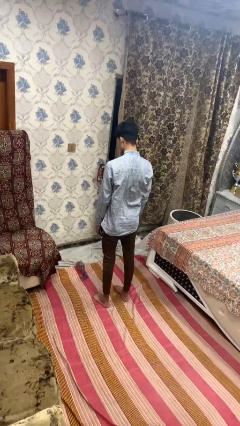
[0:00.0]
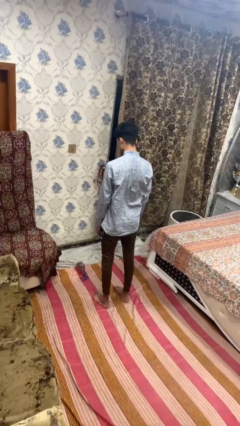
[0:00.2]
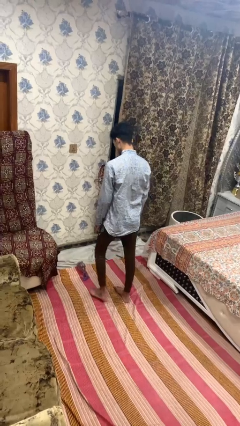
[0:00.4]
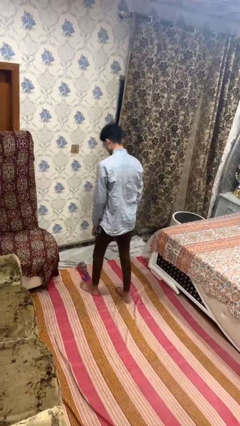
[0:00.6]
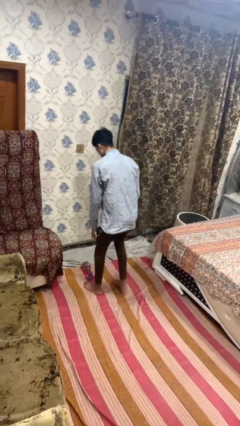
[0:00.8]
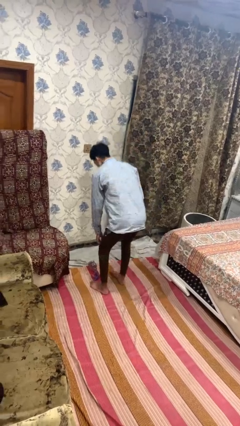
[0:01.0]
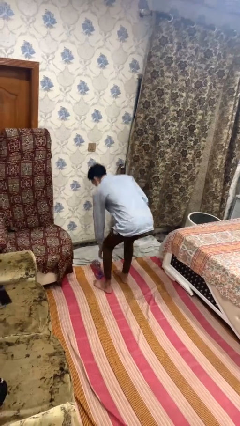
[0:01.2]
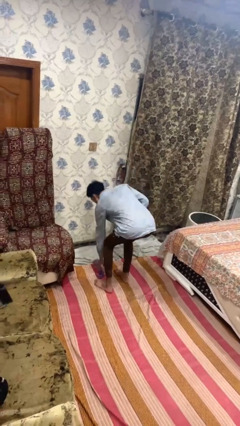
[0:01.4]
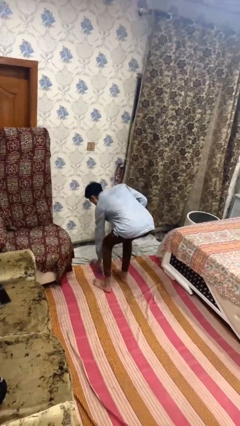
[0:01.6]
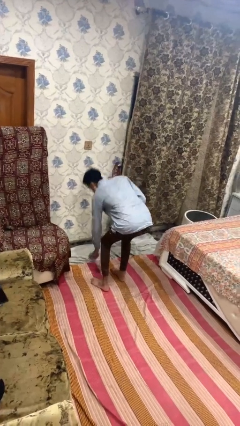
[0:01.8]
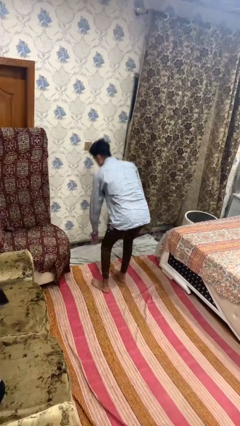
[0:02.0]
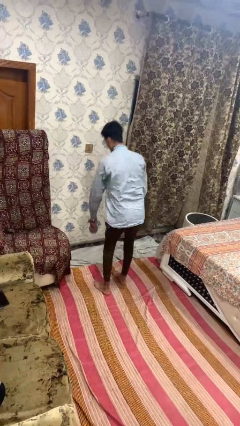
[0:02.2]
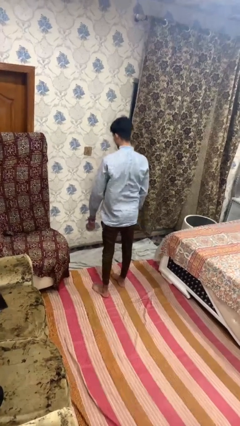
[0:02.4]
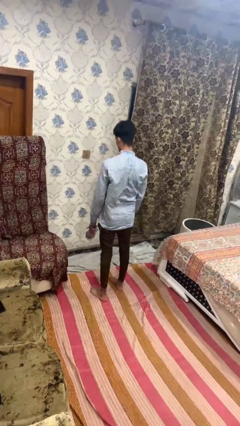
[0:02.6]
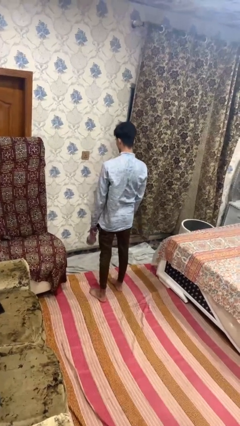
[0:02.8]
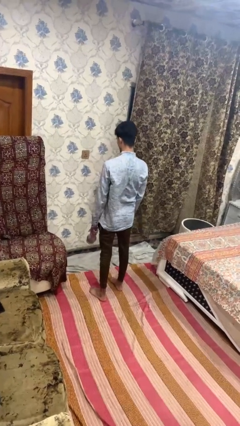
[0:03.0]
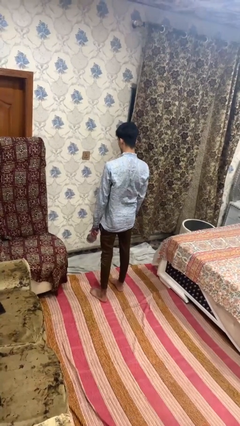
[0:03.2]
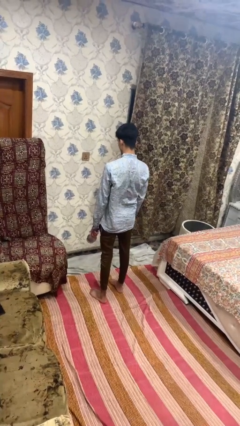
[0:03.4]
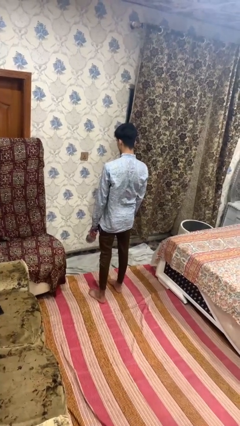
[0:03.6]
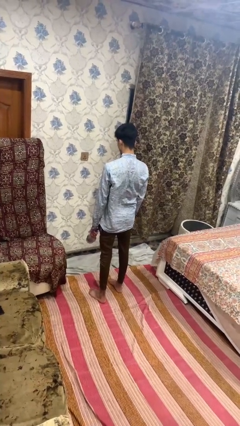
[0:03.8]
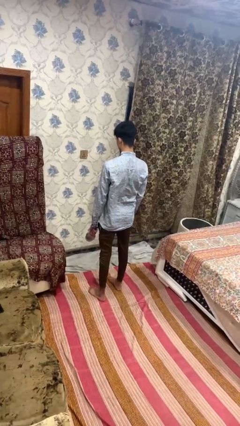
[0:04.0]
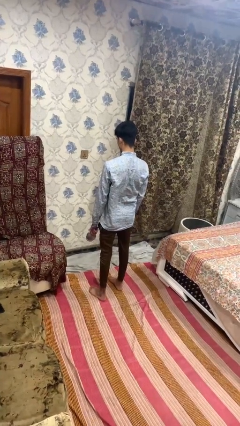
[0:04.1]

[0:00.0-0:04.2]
person picks up object from floor

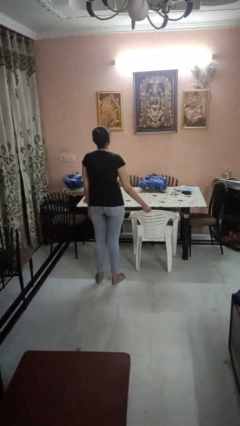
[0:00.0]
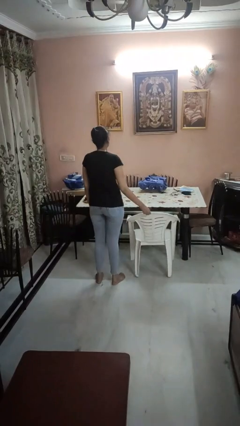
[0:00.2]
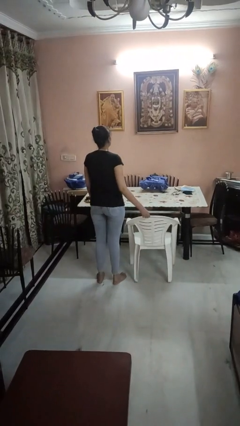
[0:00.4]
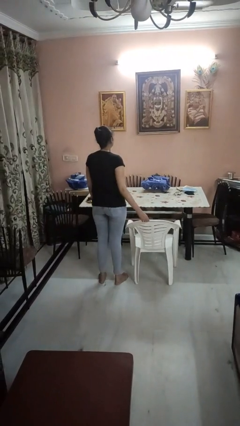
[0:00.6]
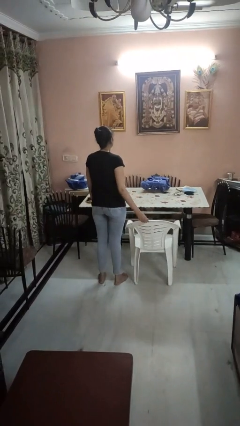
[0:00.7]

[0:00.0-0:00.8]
person pulls out chair

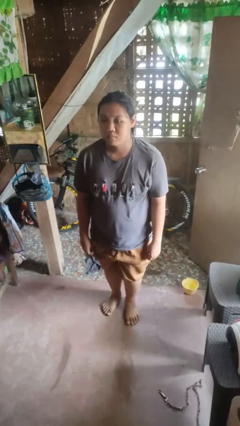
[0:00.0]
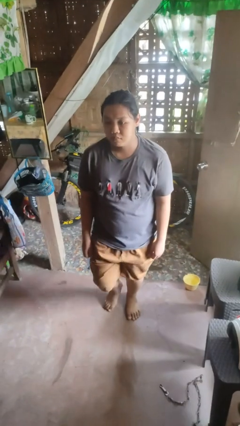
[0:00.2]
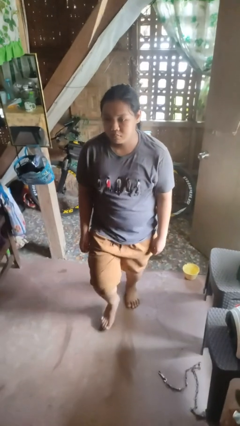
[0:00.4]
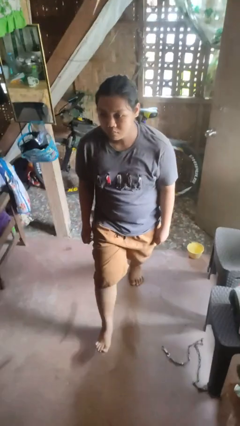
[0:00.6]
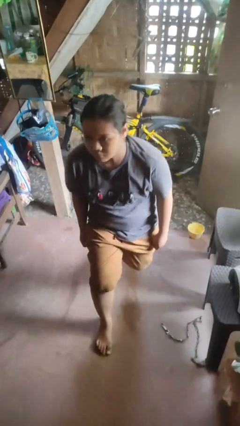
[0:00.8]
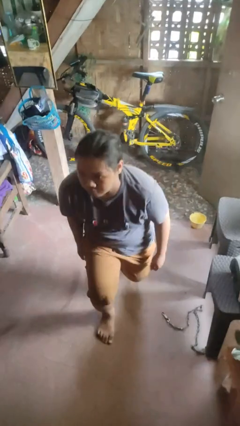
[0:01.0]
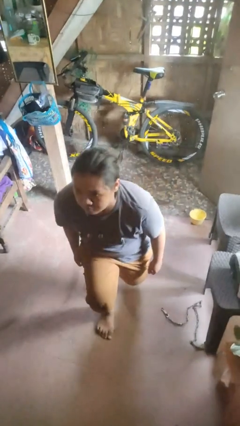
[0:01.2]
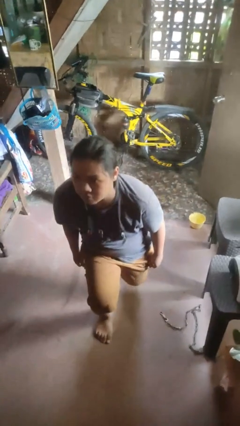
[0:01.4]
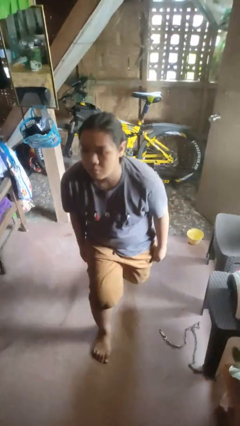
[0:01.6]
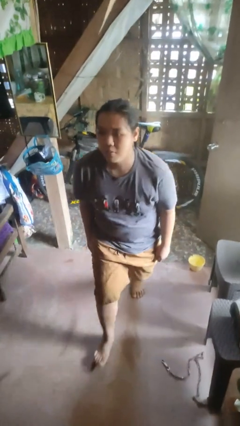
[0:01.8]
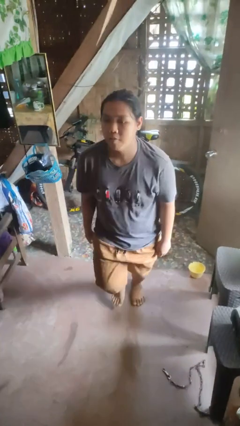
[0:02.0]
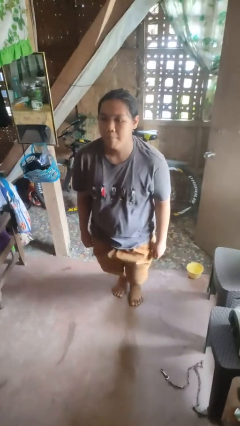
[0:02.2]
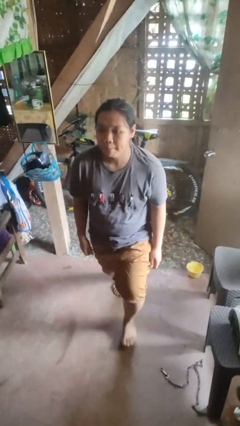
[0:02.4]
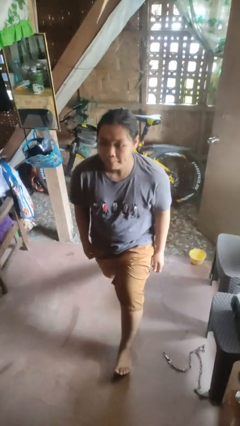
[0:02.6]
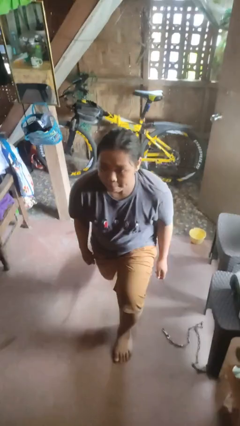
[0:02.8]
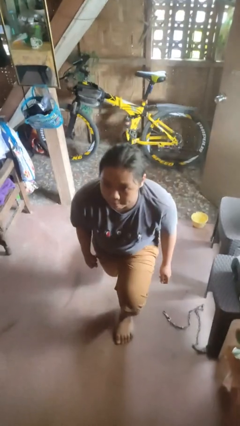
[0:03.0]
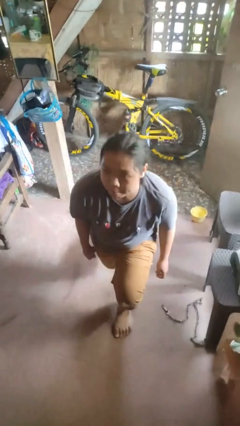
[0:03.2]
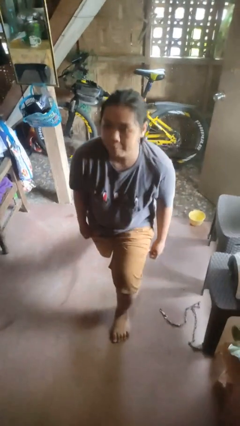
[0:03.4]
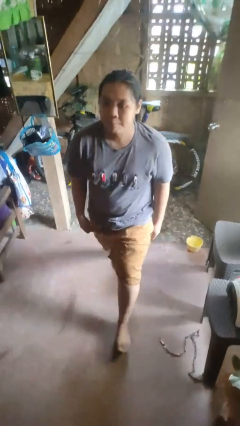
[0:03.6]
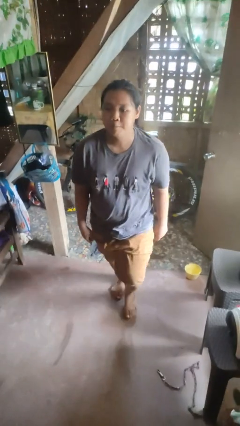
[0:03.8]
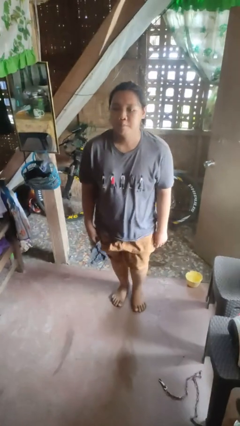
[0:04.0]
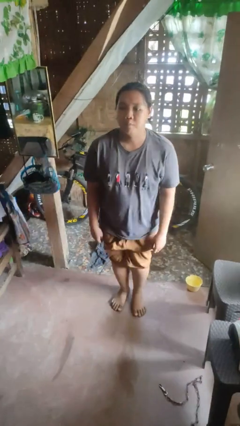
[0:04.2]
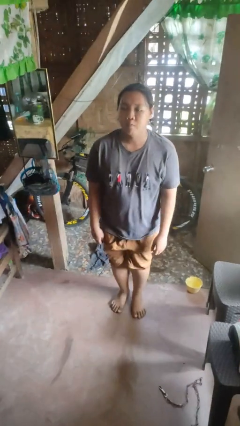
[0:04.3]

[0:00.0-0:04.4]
person exercises with lunges

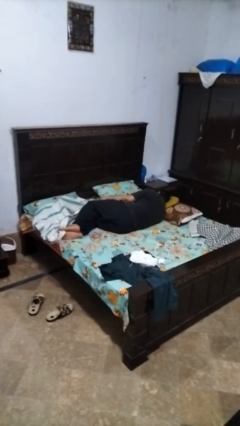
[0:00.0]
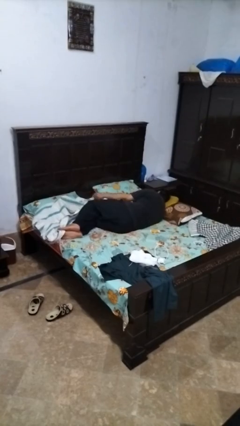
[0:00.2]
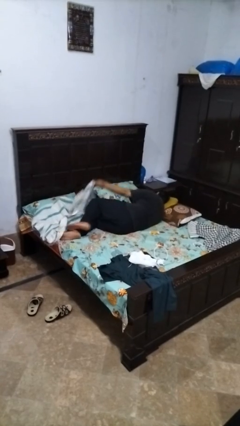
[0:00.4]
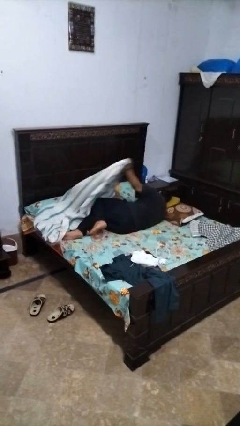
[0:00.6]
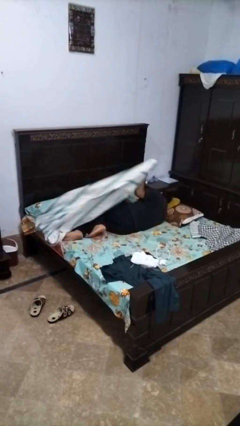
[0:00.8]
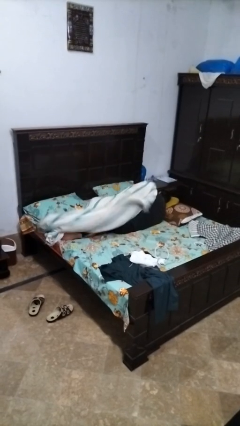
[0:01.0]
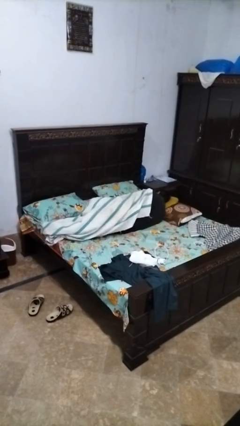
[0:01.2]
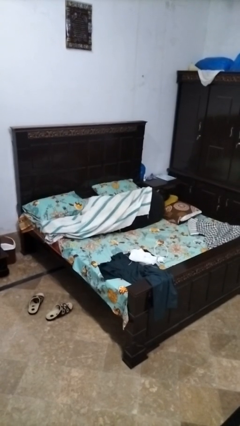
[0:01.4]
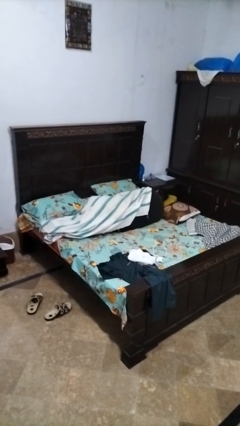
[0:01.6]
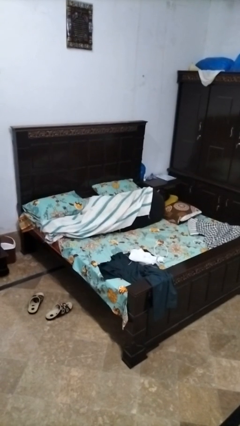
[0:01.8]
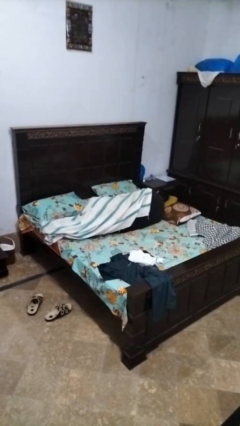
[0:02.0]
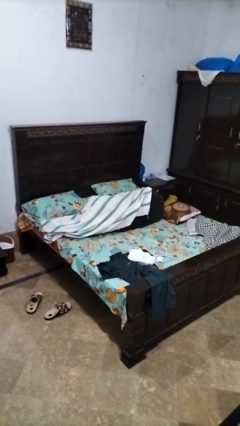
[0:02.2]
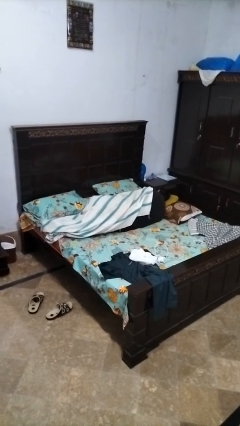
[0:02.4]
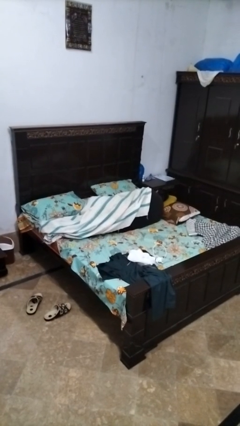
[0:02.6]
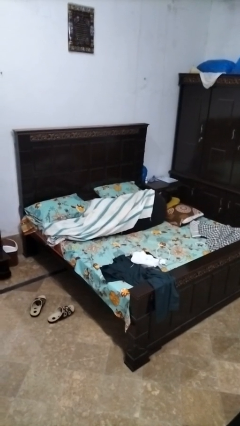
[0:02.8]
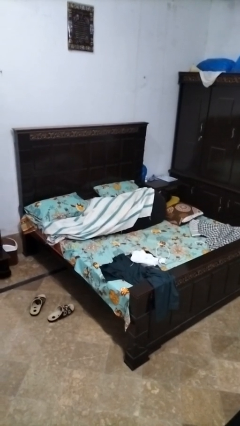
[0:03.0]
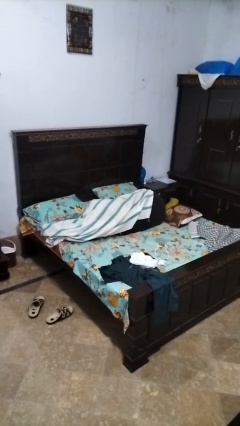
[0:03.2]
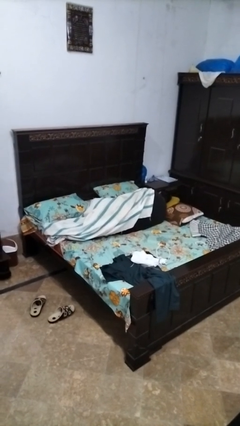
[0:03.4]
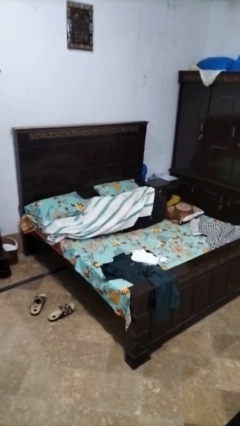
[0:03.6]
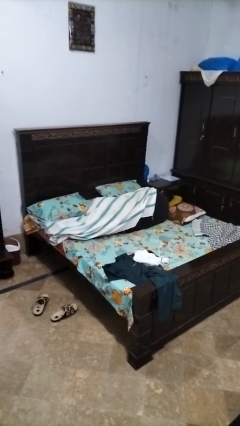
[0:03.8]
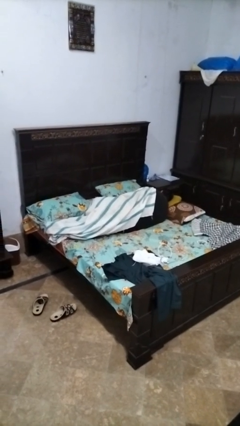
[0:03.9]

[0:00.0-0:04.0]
person covers with bedsheets

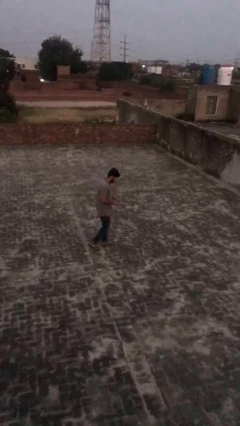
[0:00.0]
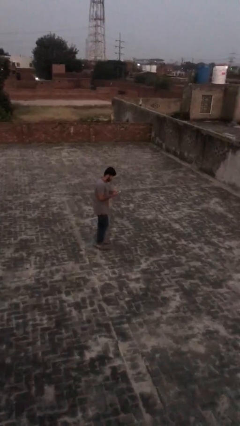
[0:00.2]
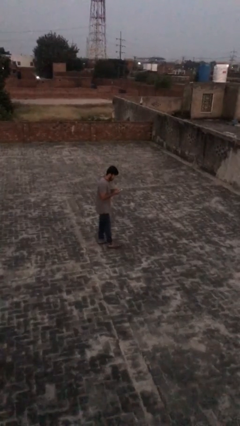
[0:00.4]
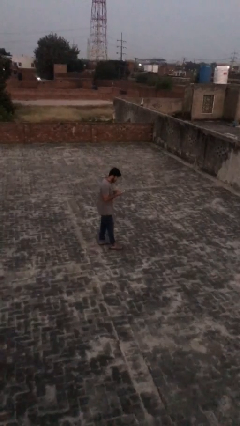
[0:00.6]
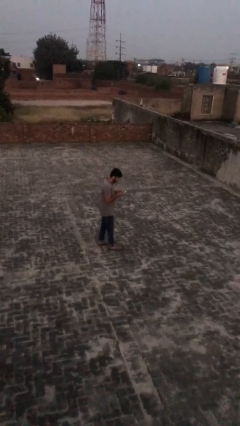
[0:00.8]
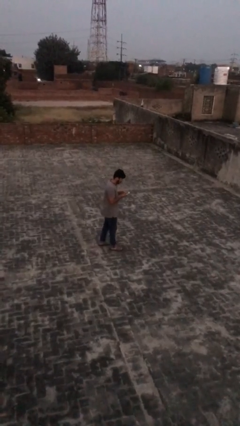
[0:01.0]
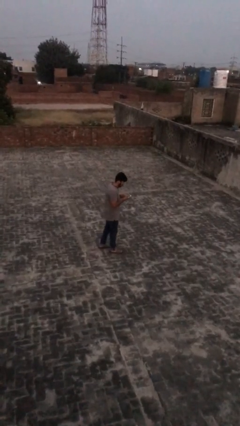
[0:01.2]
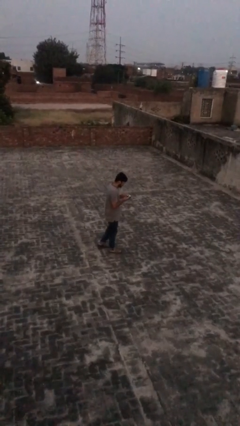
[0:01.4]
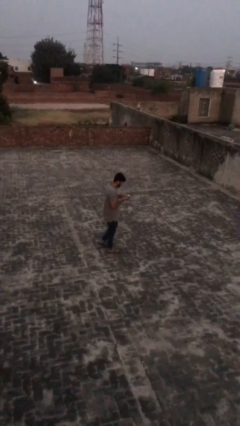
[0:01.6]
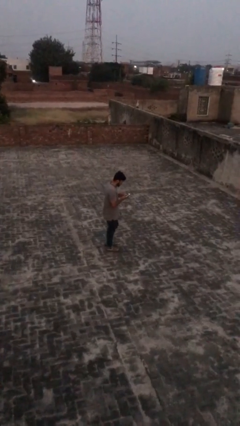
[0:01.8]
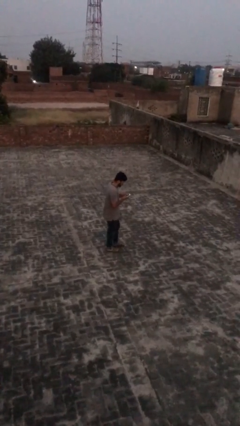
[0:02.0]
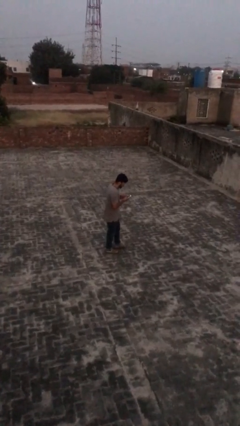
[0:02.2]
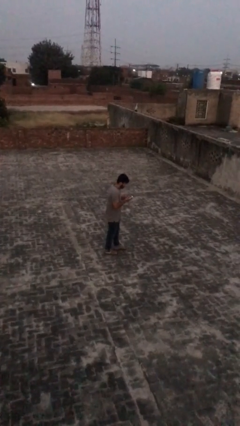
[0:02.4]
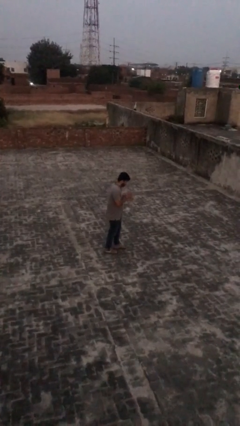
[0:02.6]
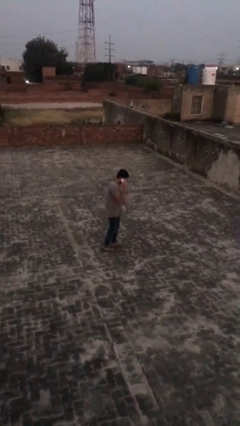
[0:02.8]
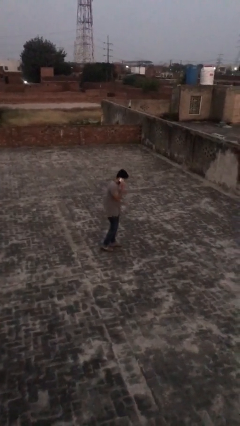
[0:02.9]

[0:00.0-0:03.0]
person texts on phone

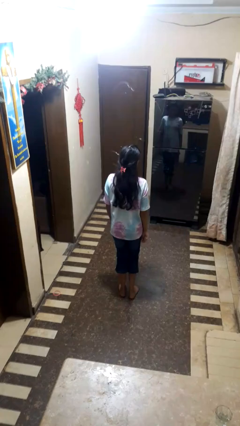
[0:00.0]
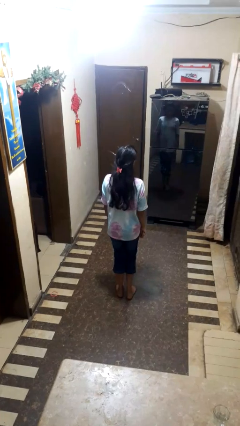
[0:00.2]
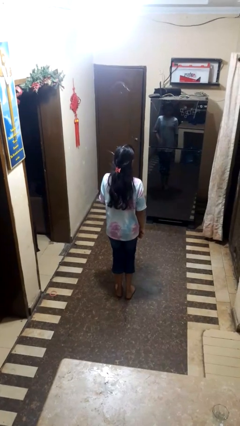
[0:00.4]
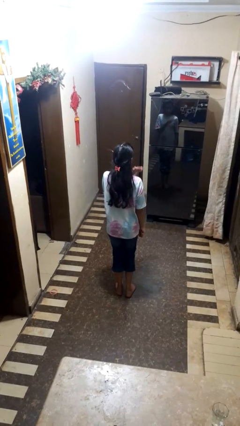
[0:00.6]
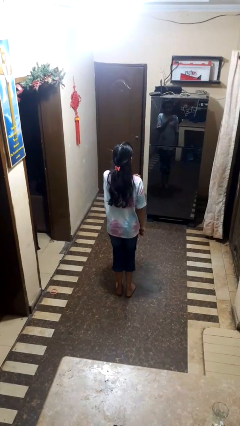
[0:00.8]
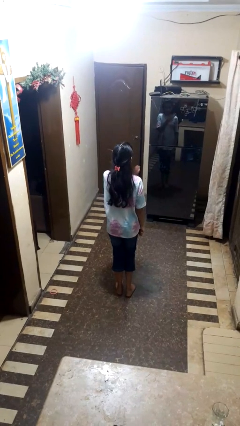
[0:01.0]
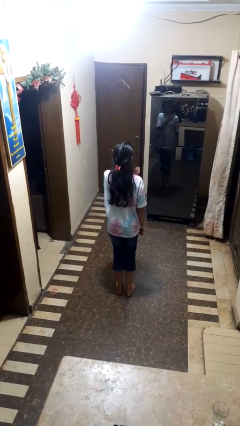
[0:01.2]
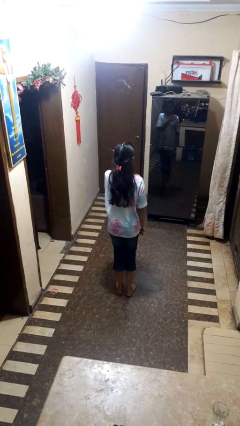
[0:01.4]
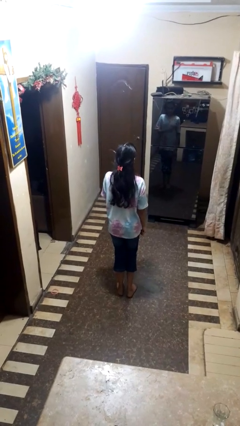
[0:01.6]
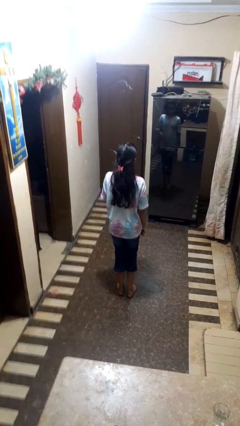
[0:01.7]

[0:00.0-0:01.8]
person drums on chest
